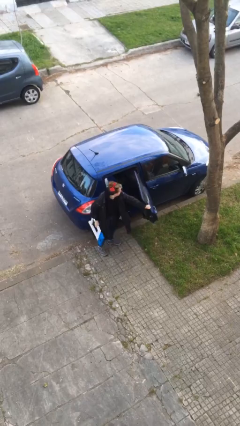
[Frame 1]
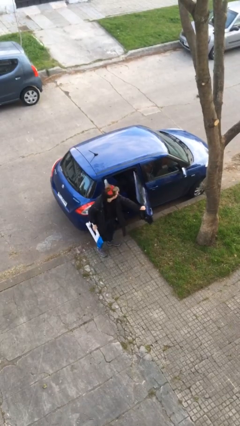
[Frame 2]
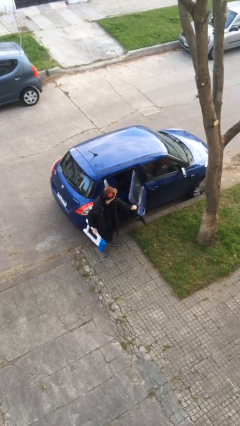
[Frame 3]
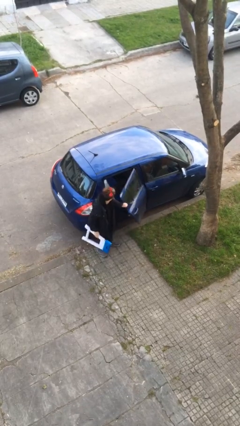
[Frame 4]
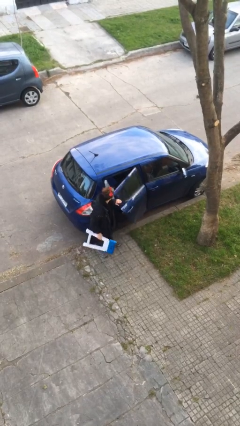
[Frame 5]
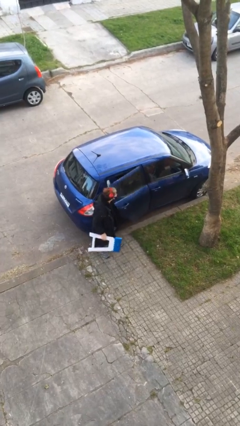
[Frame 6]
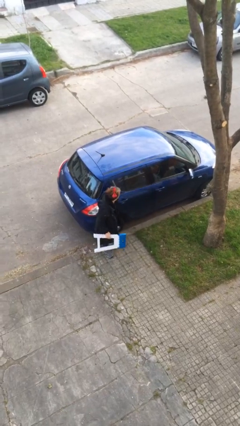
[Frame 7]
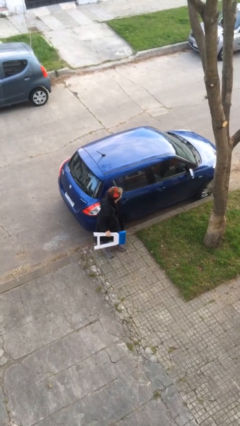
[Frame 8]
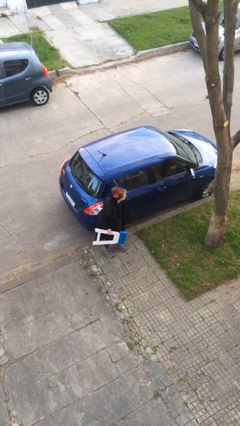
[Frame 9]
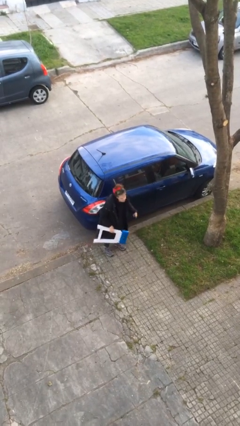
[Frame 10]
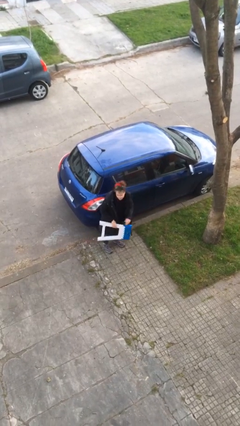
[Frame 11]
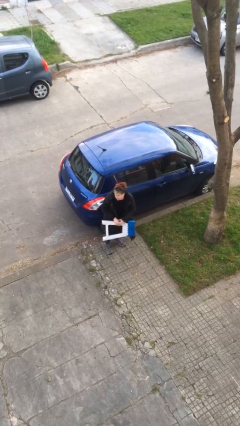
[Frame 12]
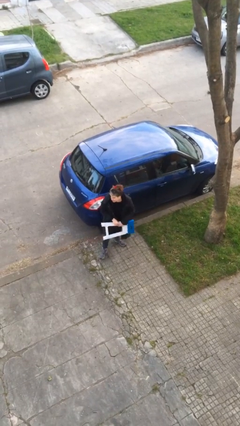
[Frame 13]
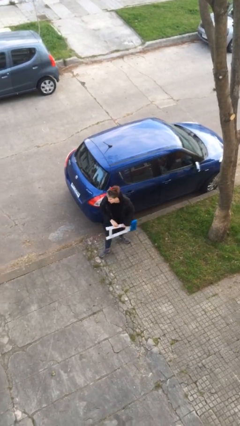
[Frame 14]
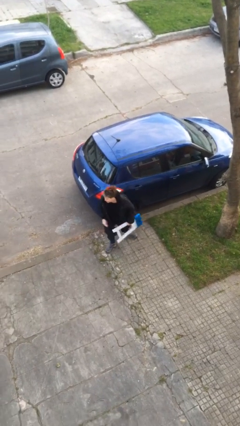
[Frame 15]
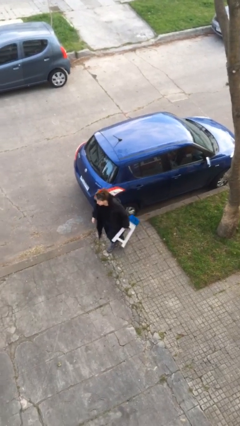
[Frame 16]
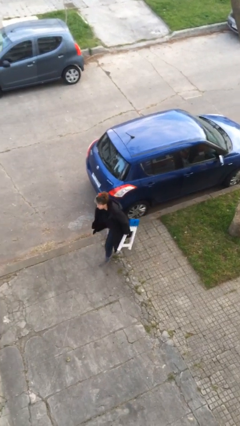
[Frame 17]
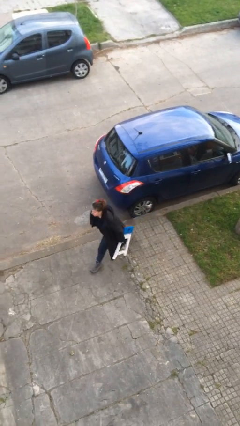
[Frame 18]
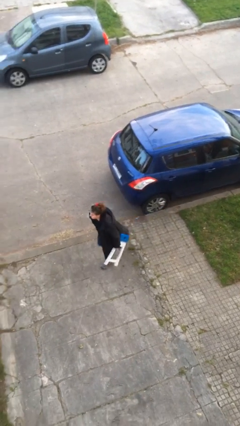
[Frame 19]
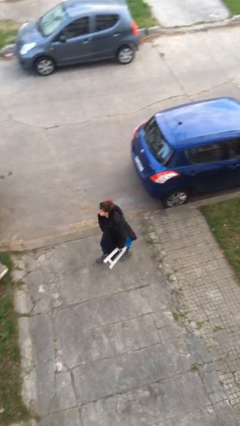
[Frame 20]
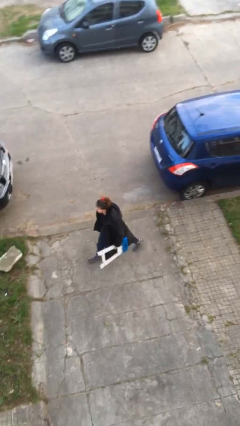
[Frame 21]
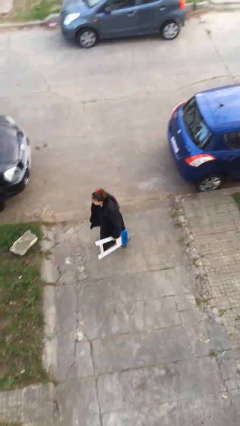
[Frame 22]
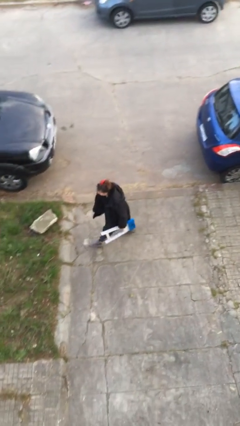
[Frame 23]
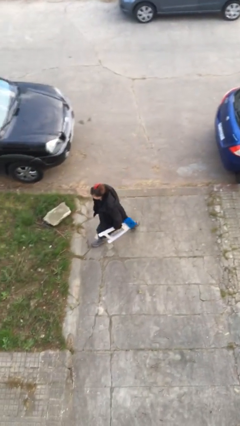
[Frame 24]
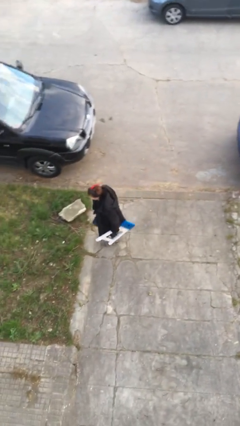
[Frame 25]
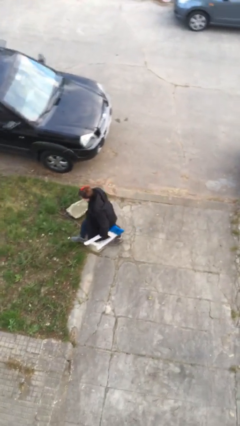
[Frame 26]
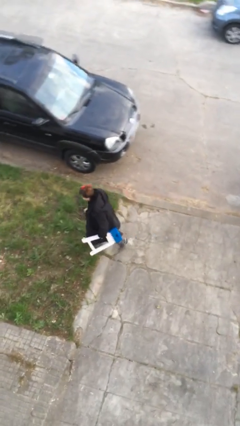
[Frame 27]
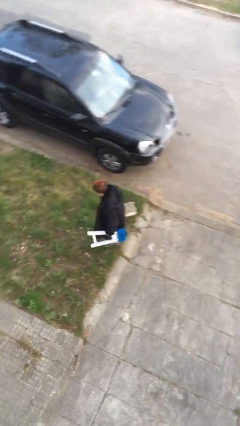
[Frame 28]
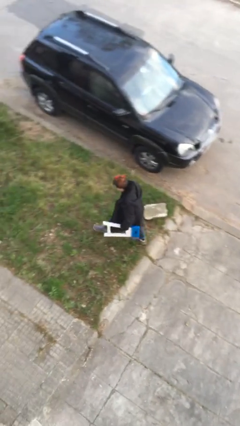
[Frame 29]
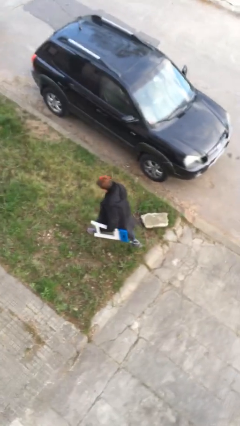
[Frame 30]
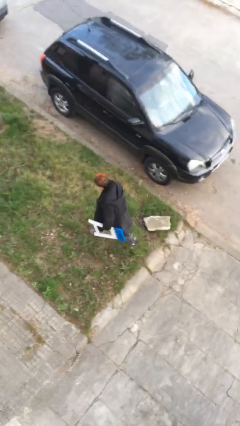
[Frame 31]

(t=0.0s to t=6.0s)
person closes car door

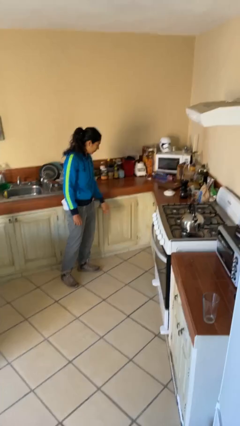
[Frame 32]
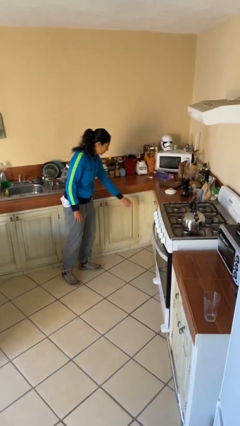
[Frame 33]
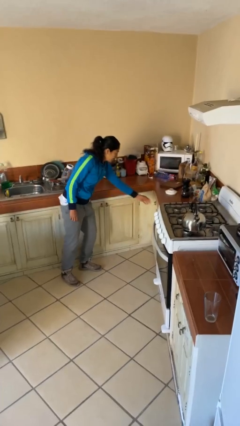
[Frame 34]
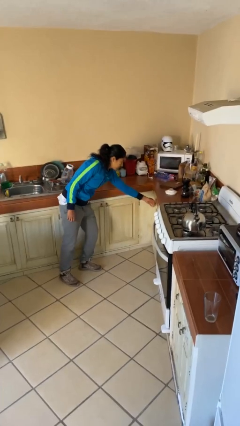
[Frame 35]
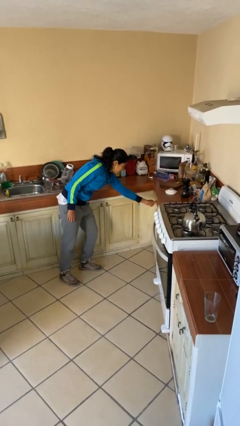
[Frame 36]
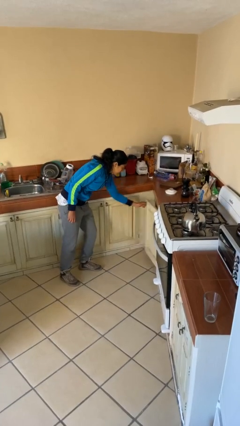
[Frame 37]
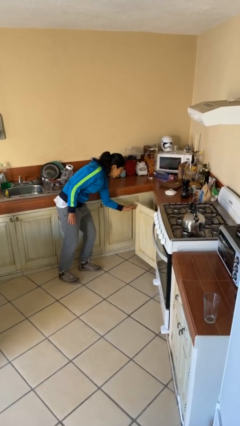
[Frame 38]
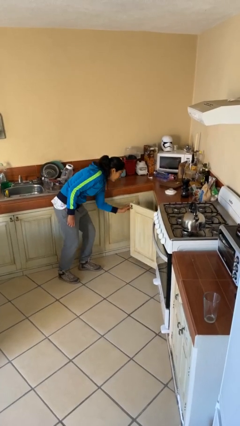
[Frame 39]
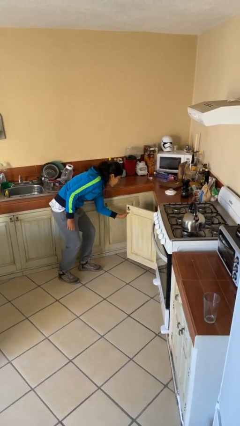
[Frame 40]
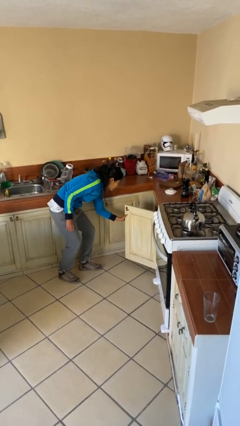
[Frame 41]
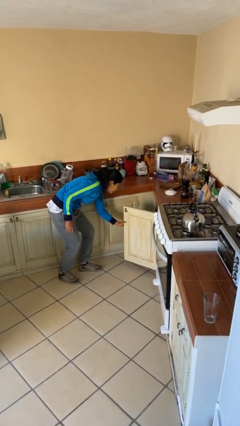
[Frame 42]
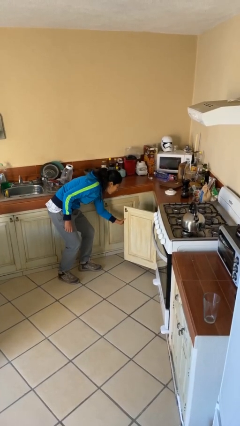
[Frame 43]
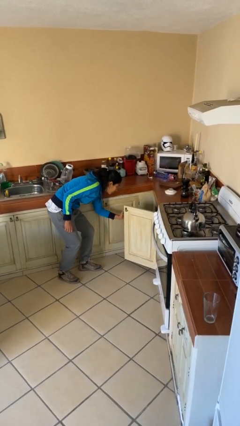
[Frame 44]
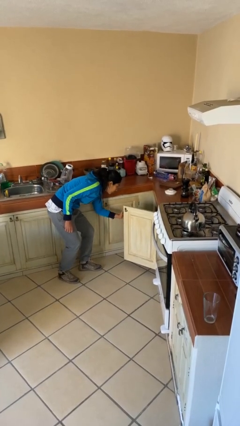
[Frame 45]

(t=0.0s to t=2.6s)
person opens cabinet

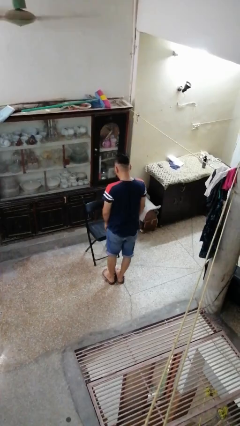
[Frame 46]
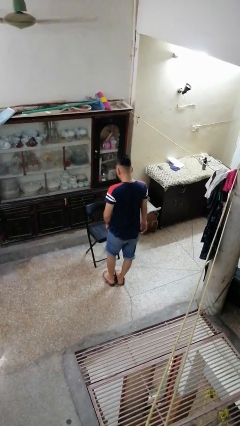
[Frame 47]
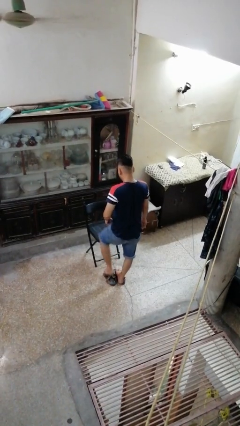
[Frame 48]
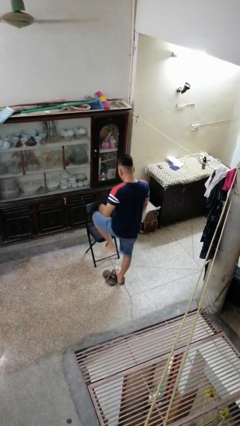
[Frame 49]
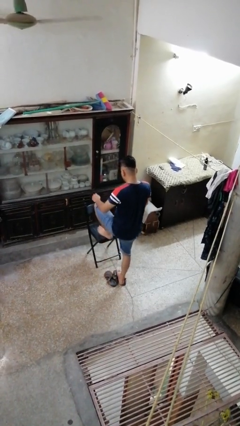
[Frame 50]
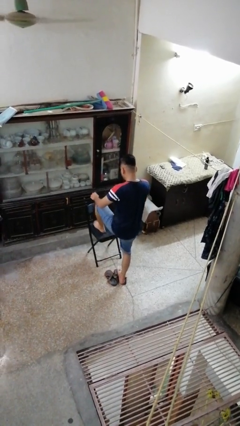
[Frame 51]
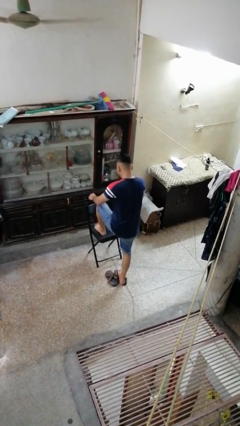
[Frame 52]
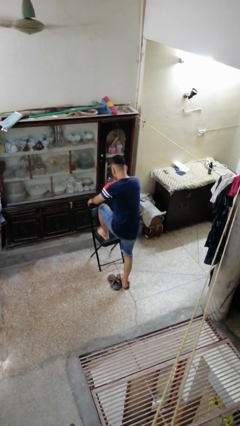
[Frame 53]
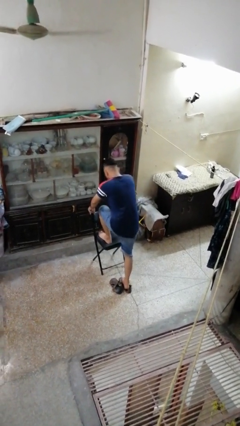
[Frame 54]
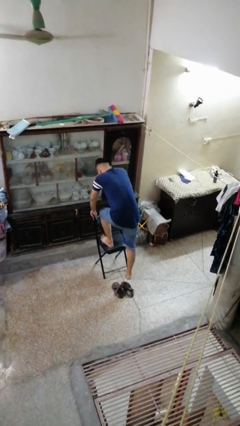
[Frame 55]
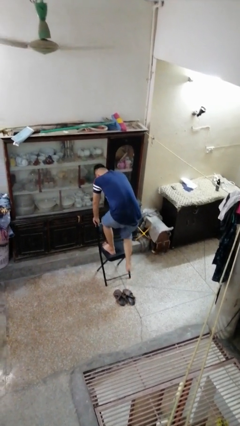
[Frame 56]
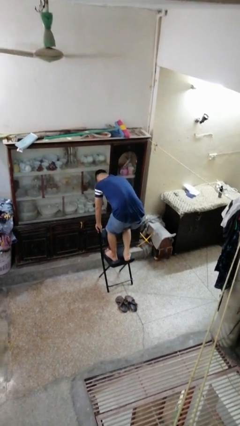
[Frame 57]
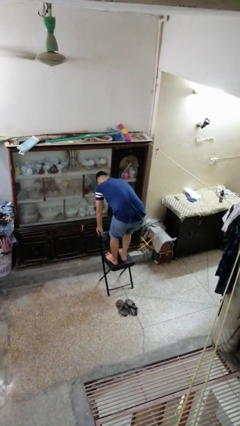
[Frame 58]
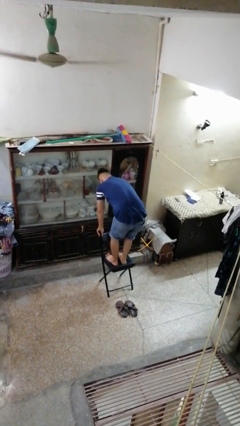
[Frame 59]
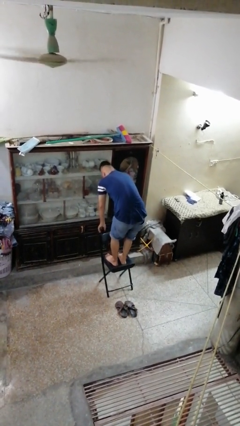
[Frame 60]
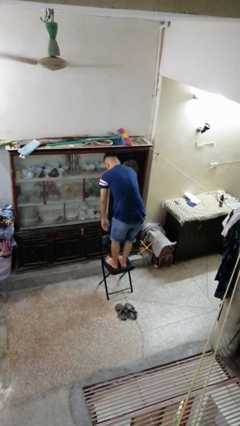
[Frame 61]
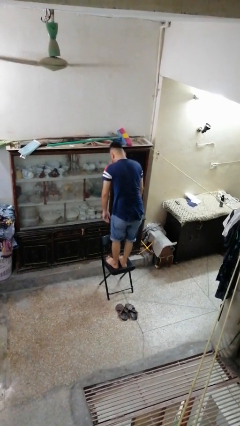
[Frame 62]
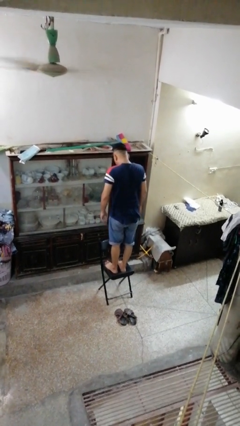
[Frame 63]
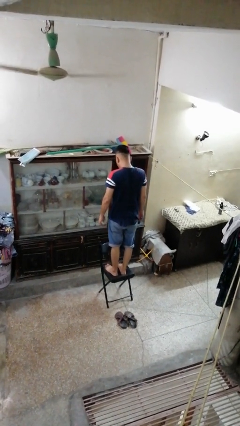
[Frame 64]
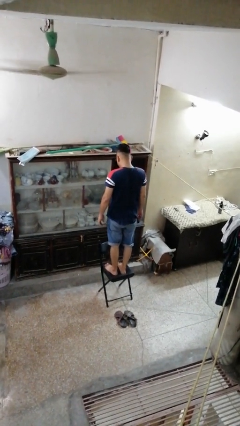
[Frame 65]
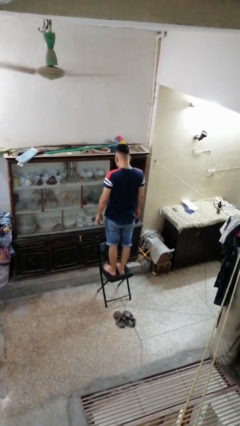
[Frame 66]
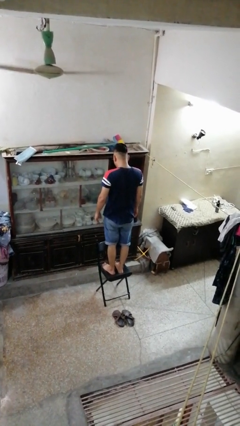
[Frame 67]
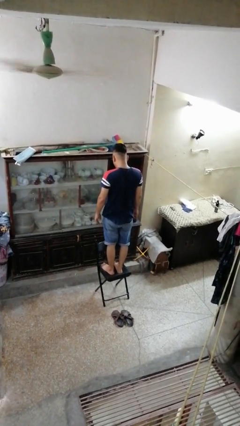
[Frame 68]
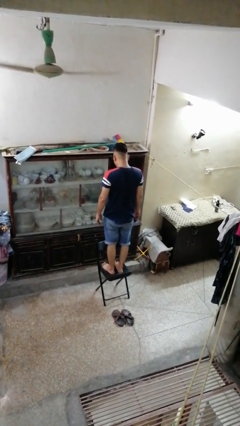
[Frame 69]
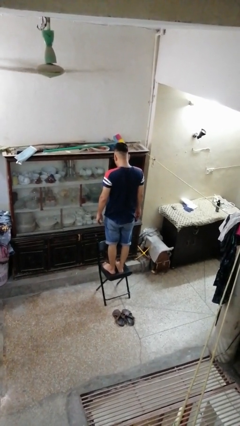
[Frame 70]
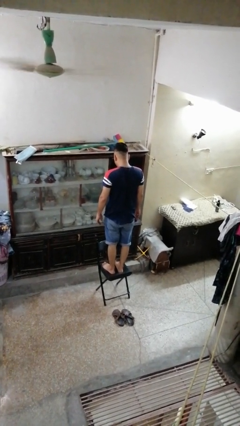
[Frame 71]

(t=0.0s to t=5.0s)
person climbs on chair

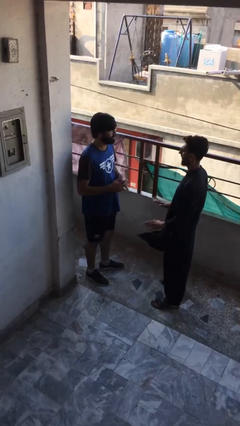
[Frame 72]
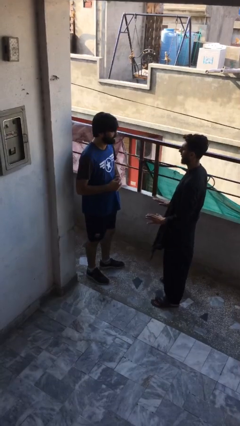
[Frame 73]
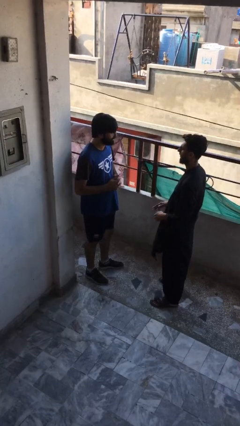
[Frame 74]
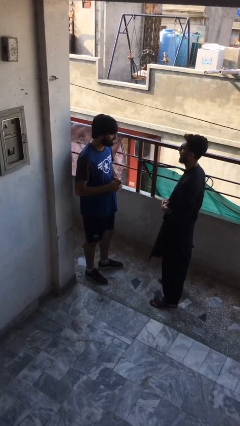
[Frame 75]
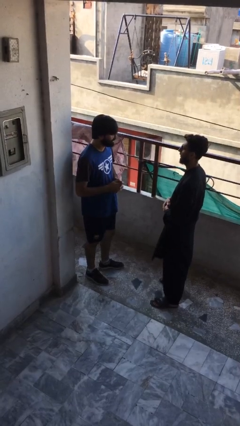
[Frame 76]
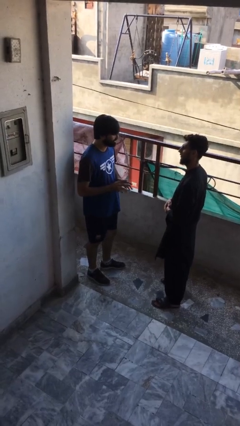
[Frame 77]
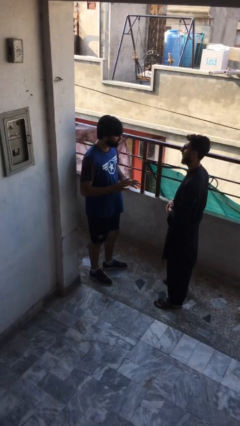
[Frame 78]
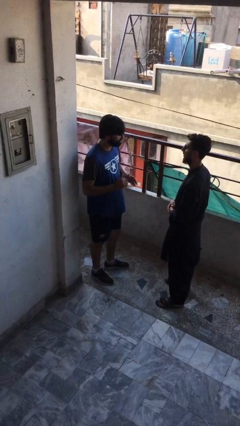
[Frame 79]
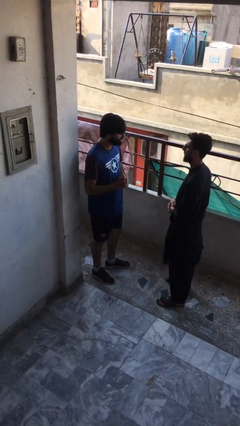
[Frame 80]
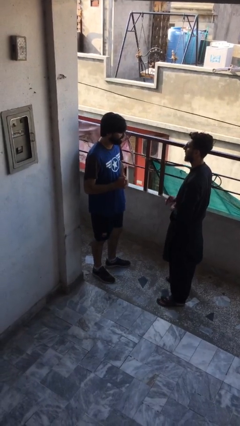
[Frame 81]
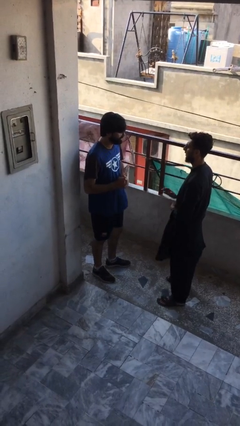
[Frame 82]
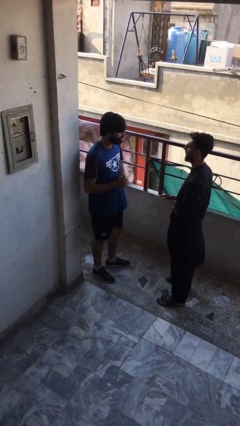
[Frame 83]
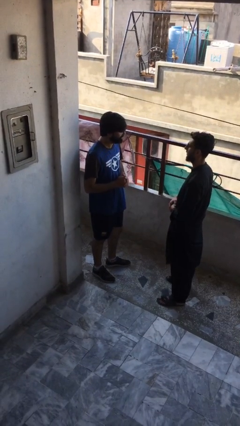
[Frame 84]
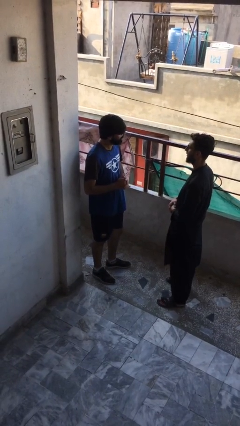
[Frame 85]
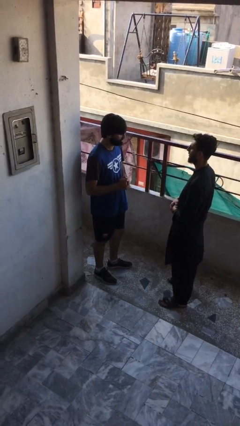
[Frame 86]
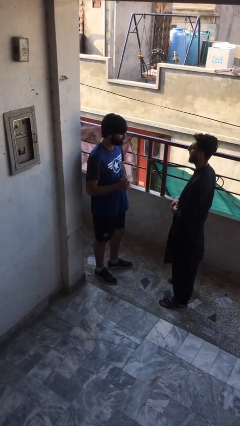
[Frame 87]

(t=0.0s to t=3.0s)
person talks to person

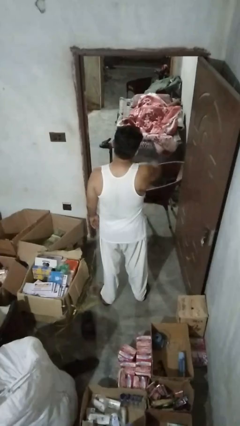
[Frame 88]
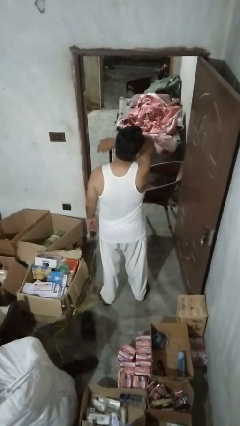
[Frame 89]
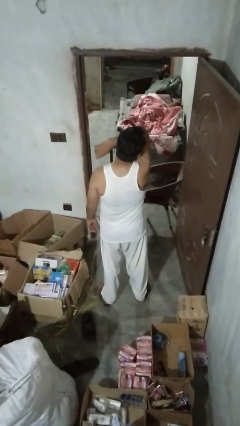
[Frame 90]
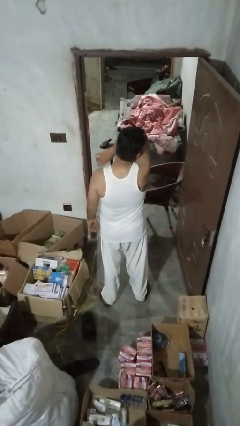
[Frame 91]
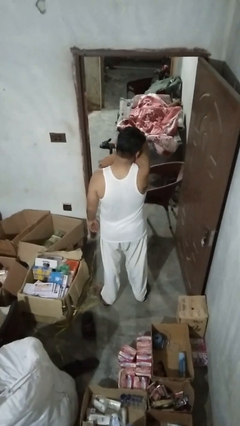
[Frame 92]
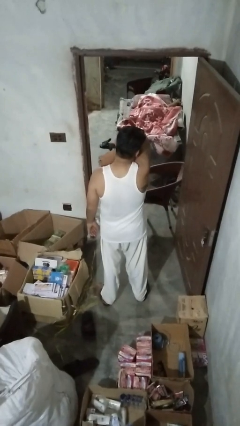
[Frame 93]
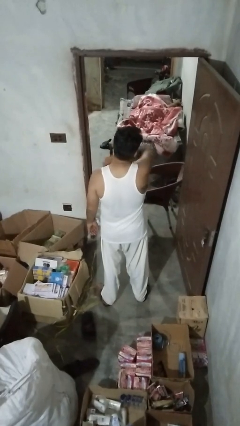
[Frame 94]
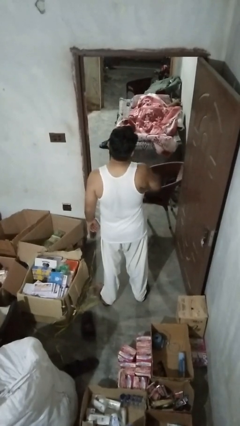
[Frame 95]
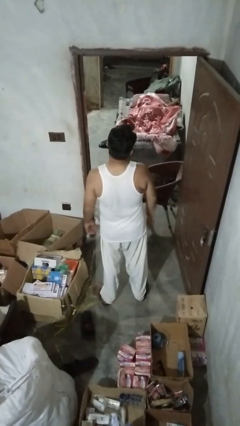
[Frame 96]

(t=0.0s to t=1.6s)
person sneezes into arm
